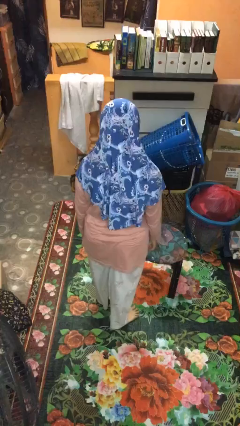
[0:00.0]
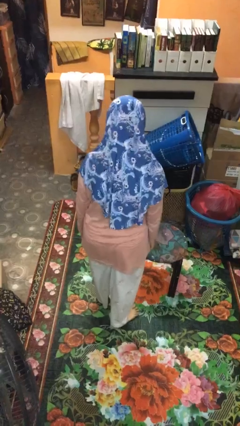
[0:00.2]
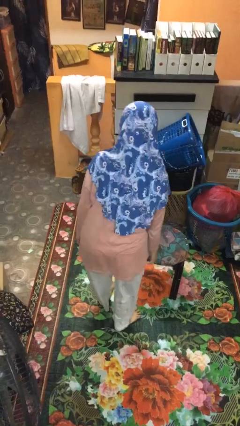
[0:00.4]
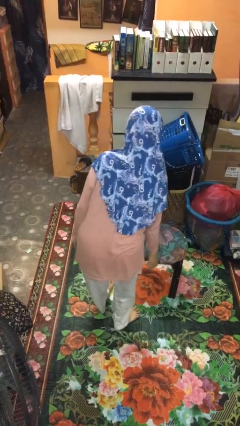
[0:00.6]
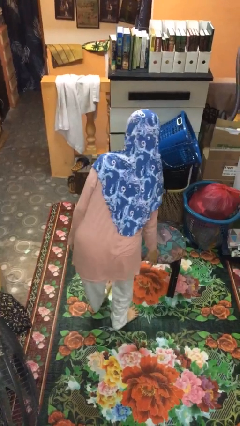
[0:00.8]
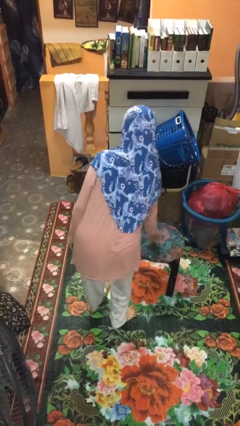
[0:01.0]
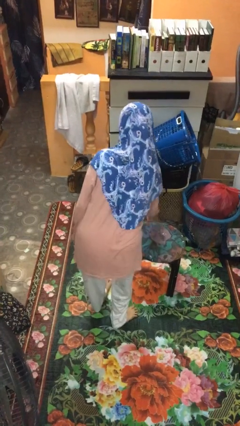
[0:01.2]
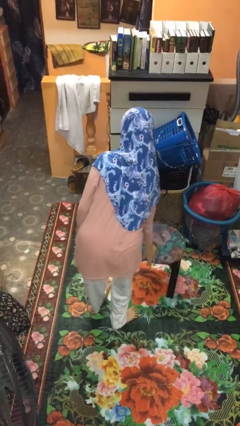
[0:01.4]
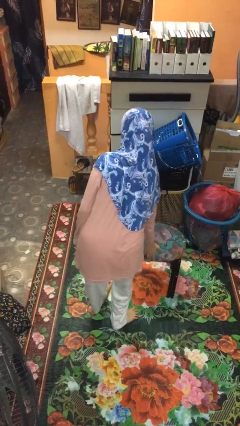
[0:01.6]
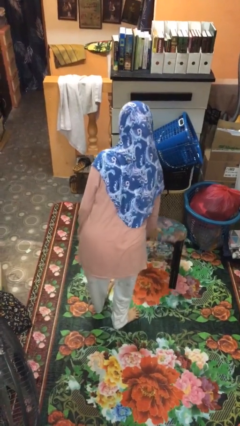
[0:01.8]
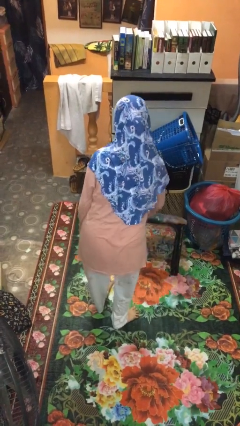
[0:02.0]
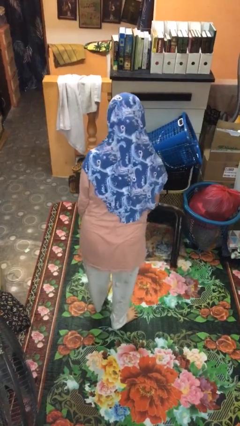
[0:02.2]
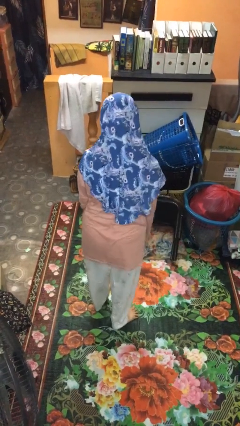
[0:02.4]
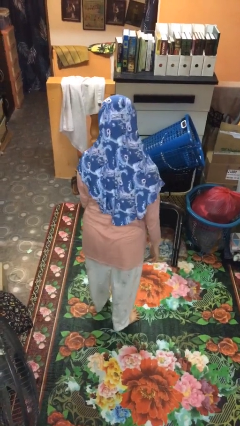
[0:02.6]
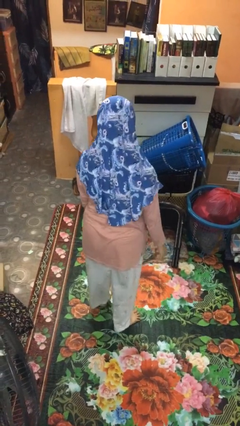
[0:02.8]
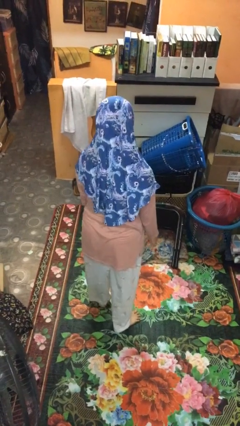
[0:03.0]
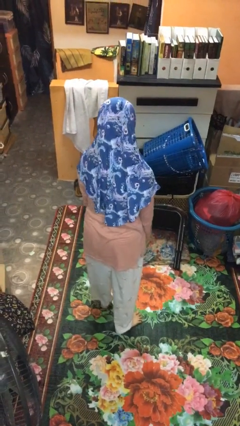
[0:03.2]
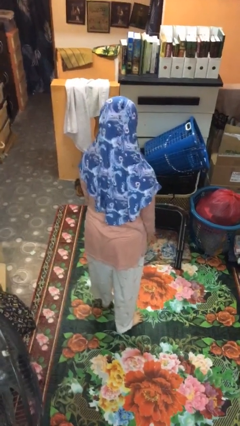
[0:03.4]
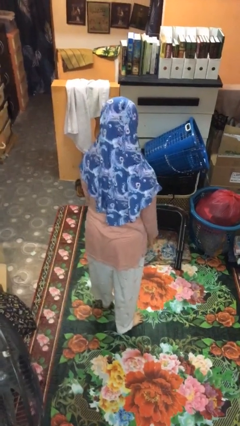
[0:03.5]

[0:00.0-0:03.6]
person knocks over furniture

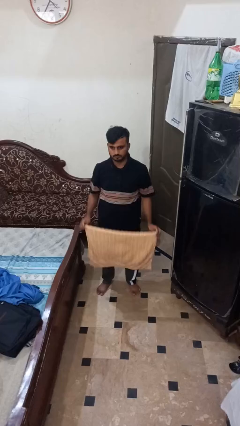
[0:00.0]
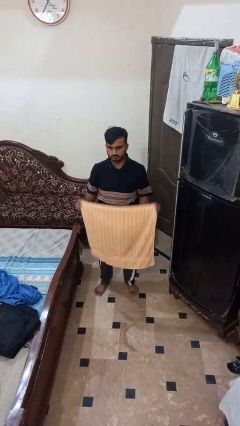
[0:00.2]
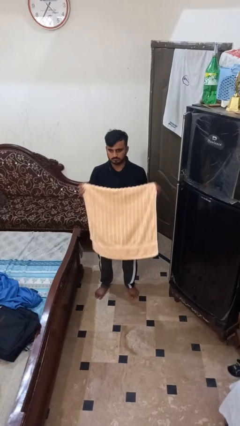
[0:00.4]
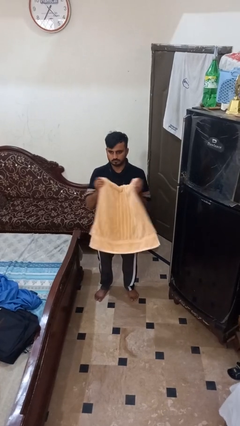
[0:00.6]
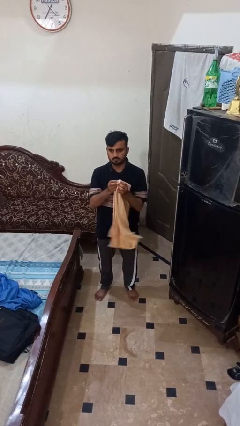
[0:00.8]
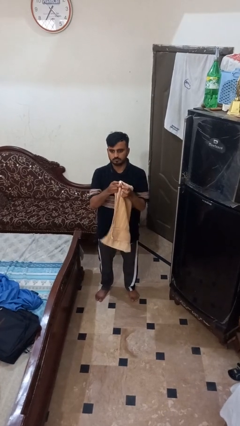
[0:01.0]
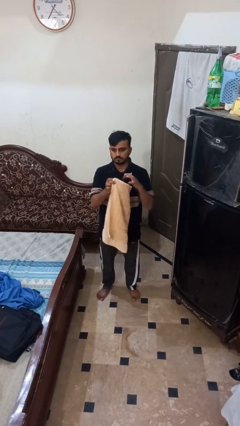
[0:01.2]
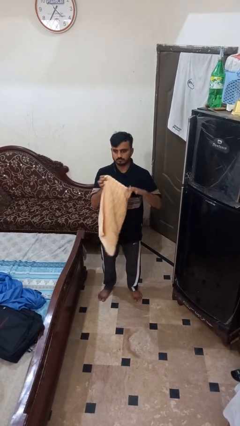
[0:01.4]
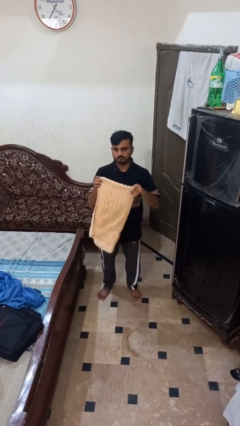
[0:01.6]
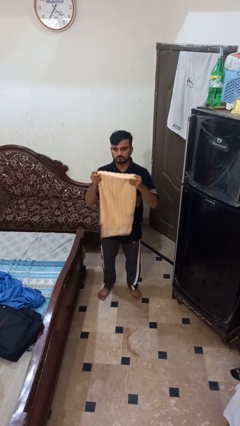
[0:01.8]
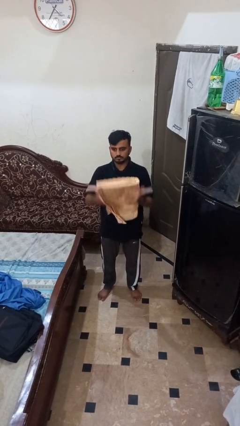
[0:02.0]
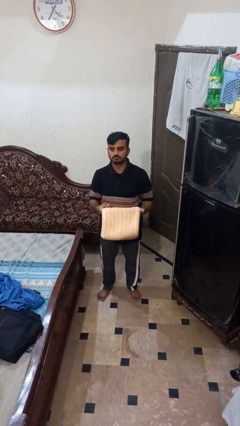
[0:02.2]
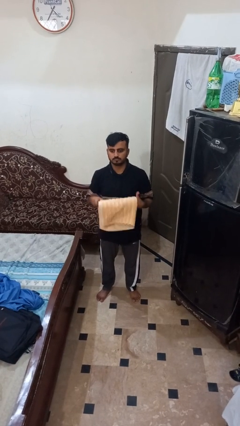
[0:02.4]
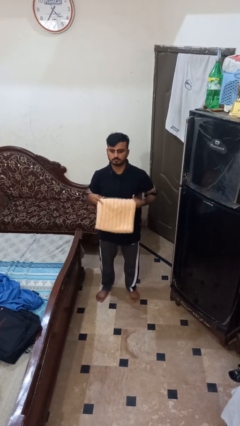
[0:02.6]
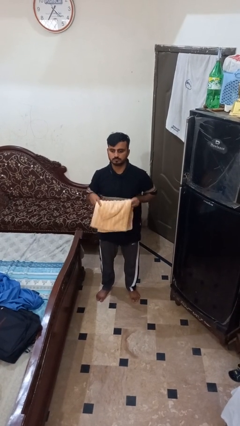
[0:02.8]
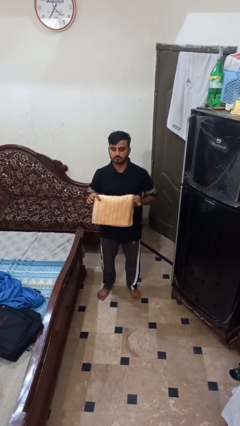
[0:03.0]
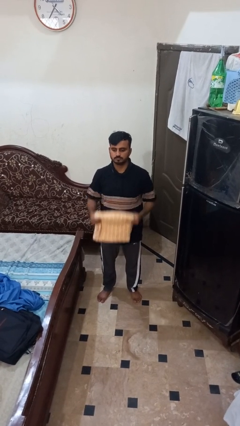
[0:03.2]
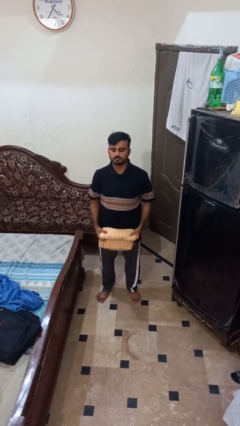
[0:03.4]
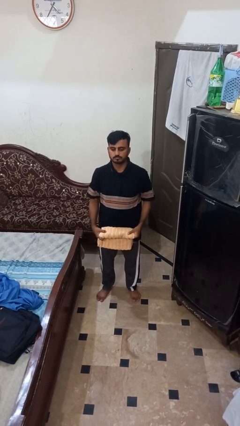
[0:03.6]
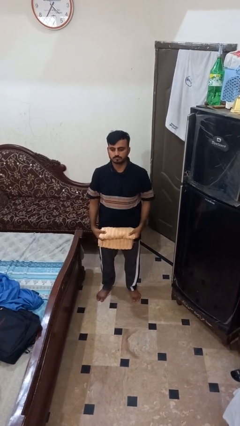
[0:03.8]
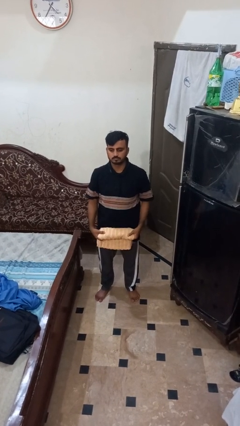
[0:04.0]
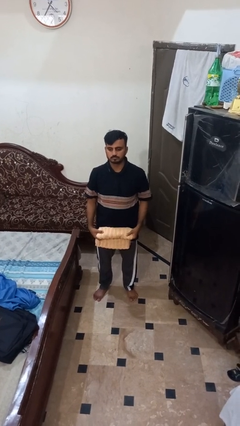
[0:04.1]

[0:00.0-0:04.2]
person folds towel

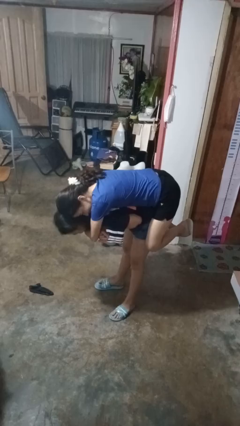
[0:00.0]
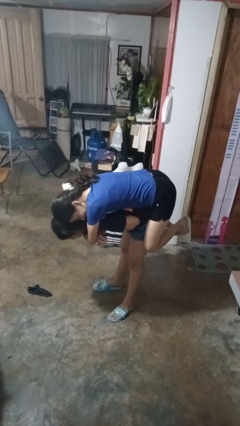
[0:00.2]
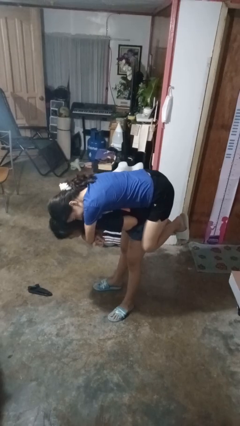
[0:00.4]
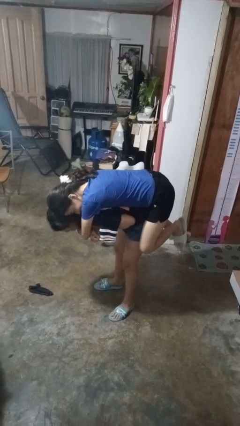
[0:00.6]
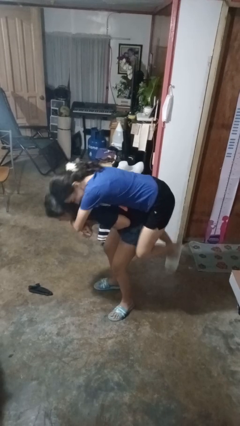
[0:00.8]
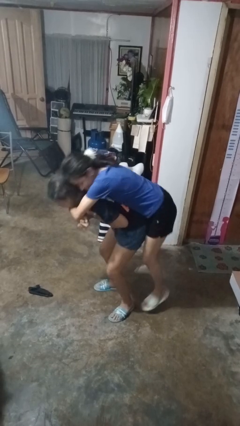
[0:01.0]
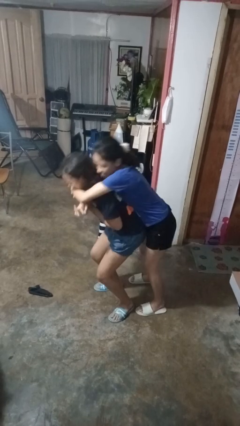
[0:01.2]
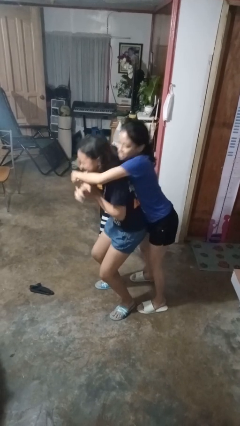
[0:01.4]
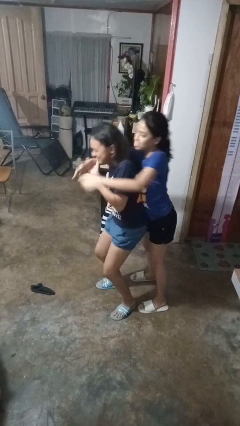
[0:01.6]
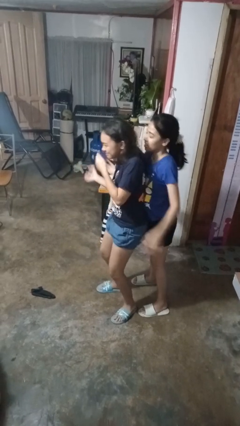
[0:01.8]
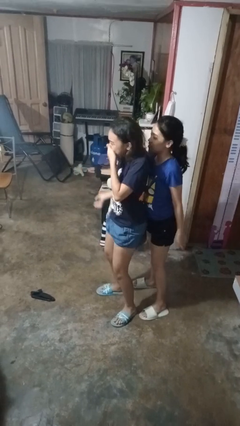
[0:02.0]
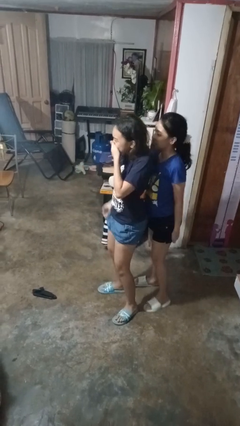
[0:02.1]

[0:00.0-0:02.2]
person puts down person

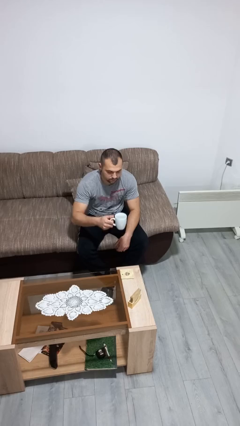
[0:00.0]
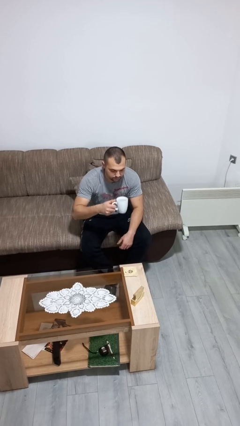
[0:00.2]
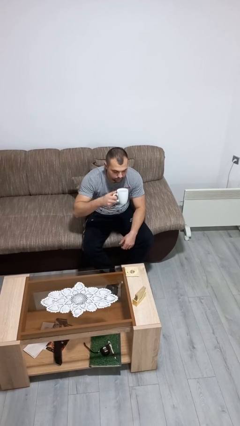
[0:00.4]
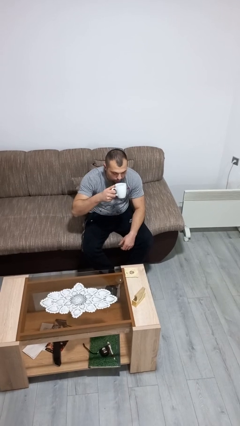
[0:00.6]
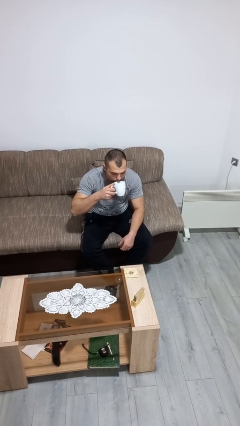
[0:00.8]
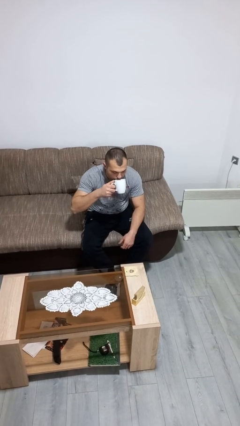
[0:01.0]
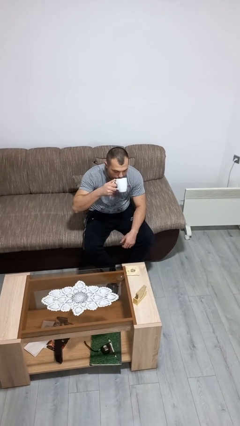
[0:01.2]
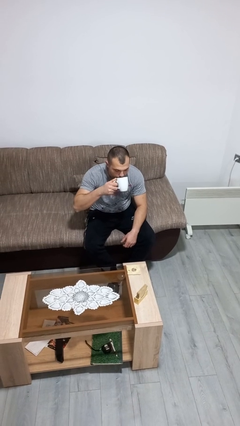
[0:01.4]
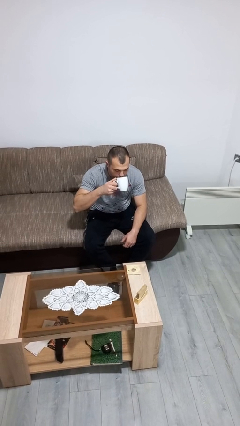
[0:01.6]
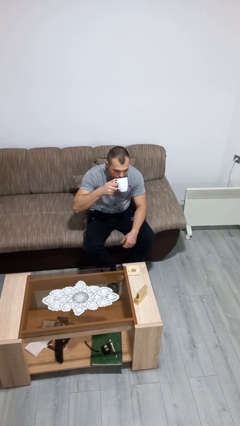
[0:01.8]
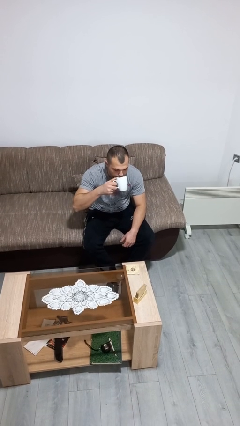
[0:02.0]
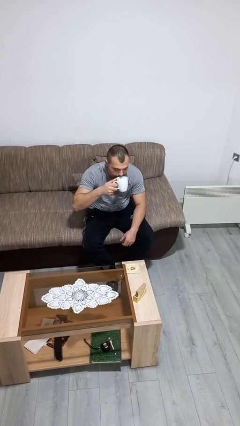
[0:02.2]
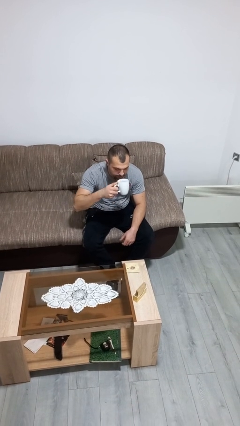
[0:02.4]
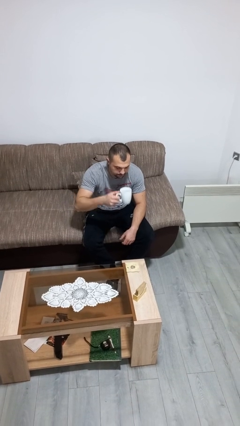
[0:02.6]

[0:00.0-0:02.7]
person drinks from mug

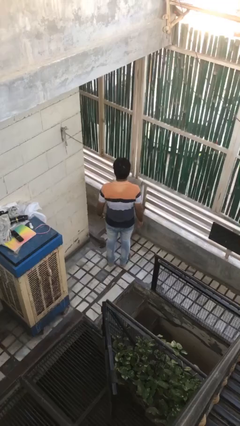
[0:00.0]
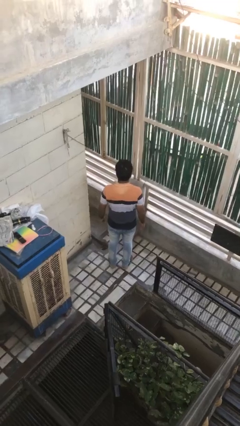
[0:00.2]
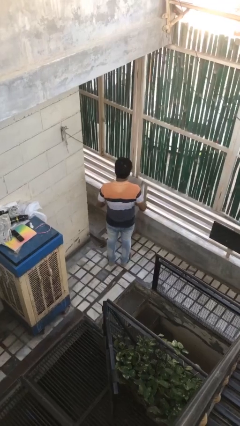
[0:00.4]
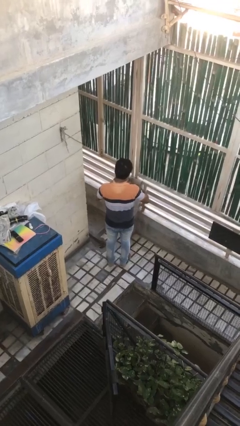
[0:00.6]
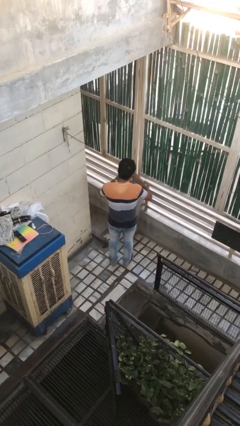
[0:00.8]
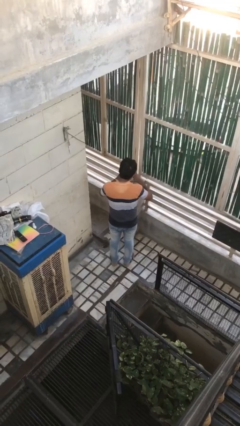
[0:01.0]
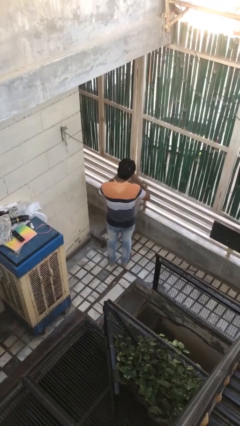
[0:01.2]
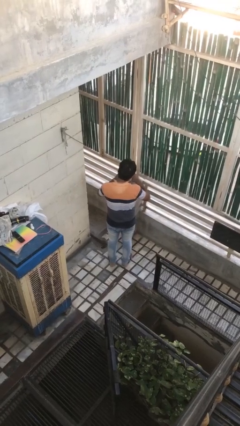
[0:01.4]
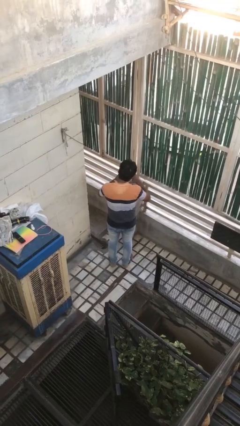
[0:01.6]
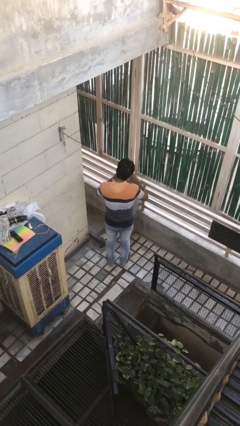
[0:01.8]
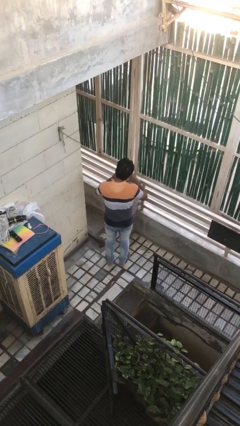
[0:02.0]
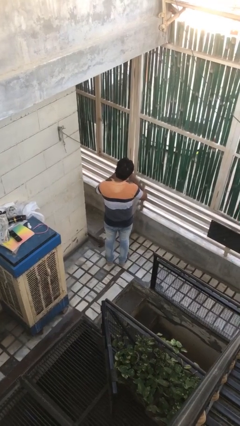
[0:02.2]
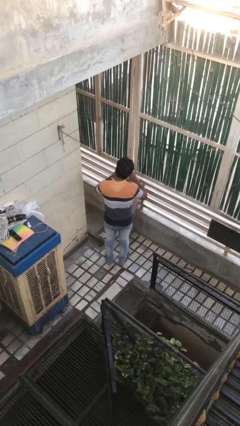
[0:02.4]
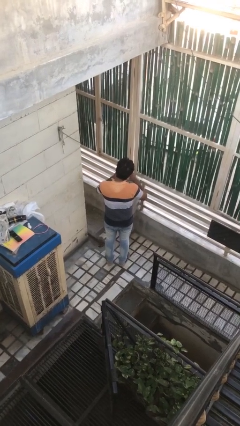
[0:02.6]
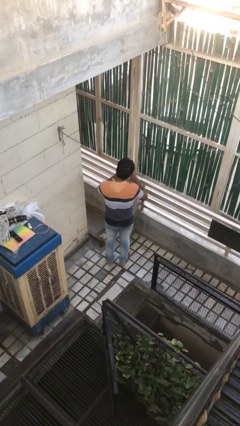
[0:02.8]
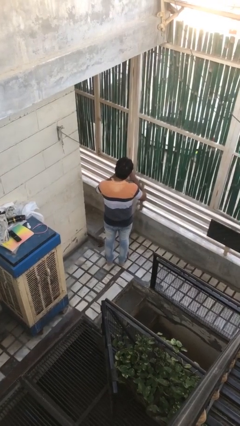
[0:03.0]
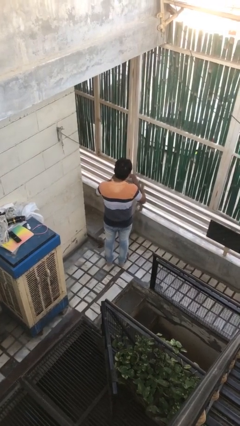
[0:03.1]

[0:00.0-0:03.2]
person files fingernails

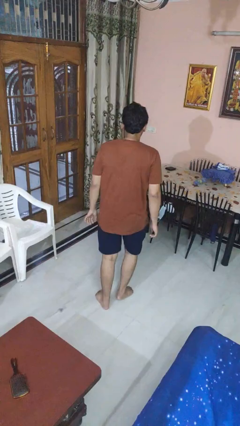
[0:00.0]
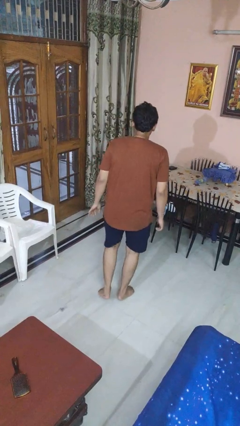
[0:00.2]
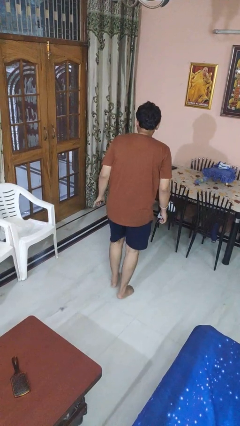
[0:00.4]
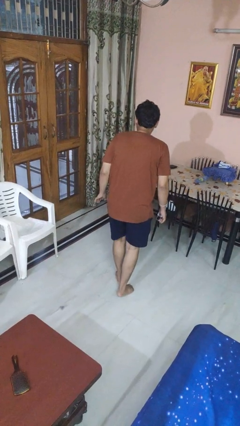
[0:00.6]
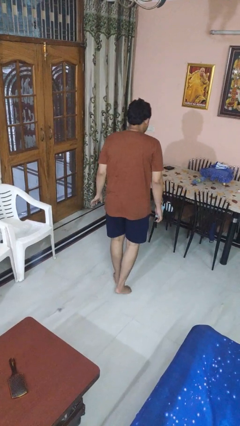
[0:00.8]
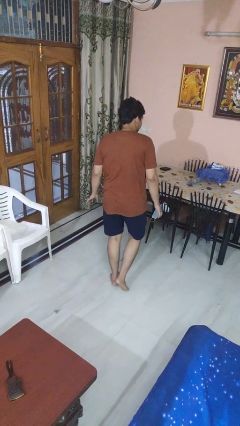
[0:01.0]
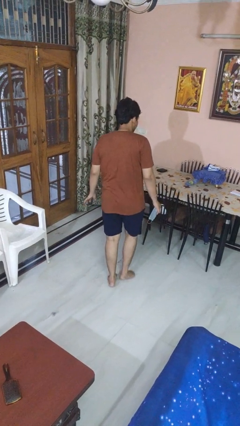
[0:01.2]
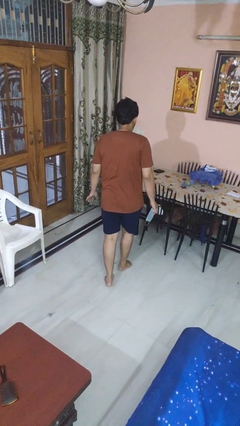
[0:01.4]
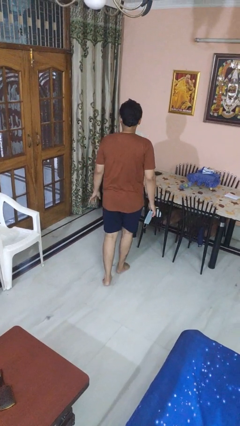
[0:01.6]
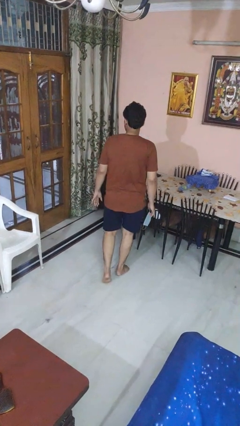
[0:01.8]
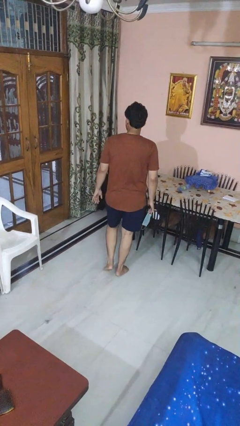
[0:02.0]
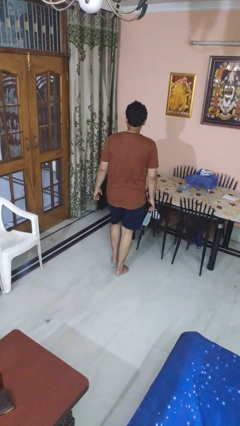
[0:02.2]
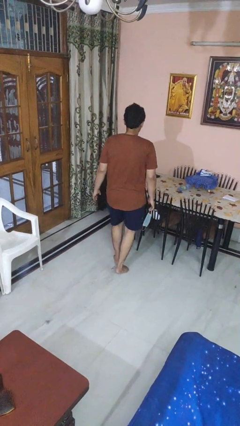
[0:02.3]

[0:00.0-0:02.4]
person walks tiptoe
